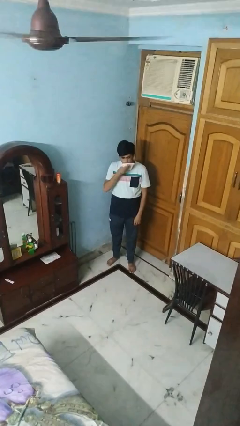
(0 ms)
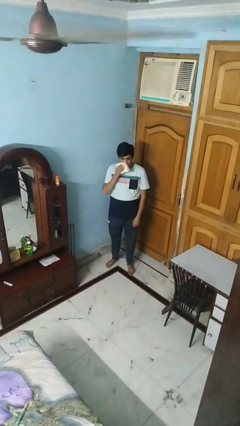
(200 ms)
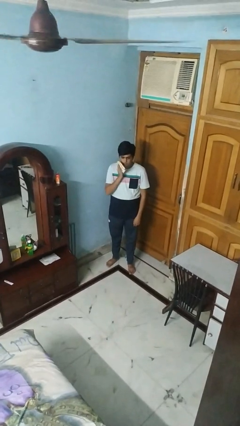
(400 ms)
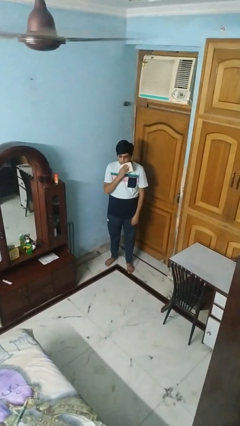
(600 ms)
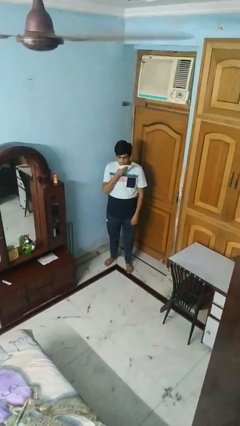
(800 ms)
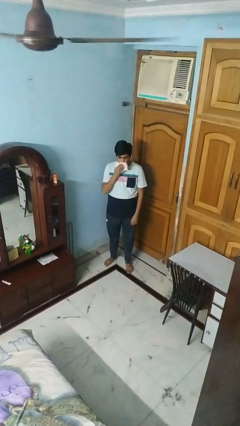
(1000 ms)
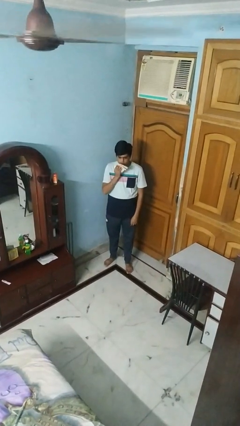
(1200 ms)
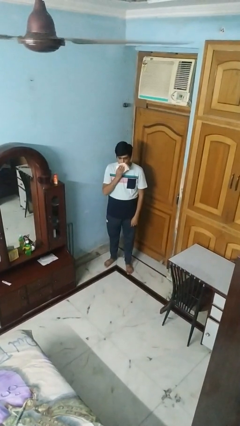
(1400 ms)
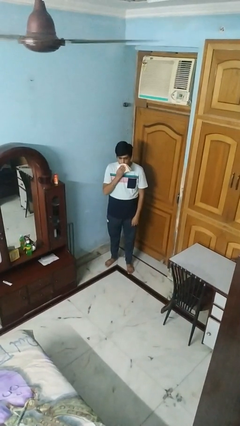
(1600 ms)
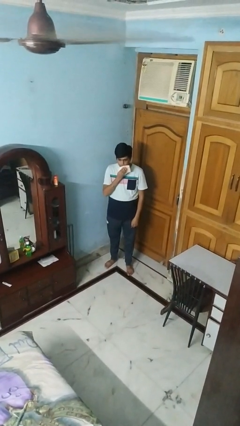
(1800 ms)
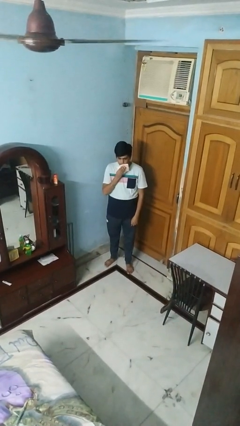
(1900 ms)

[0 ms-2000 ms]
person wipes mouth with napkin

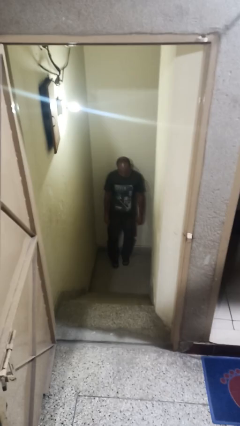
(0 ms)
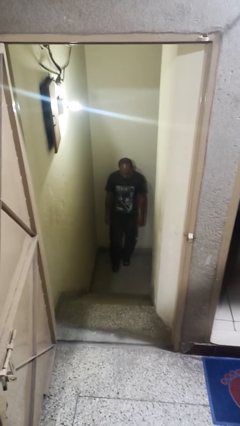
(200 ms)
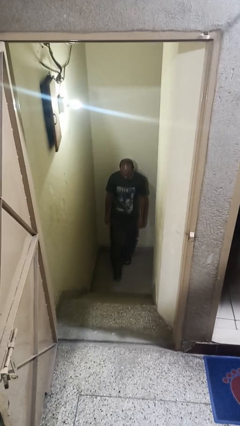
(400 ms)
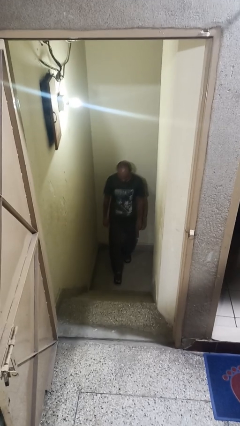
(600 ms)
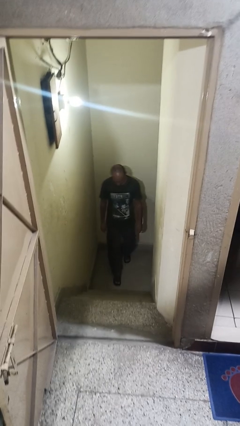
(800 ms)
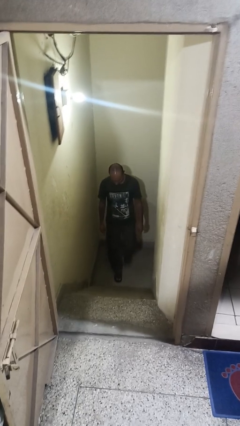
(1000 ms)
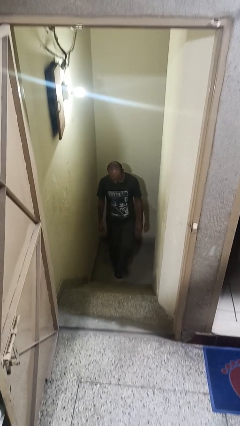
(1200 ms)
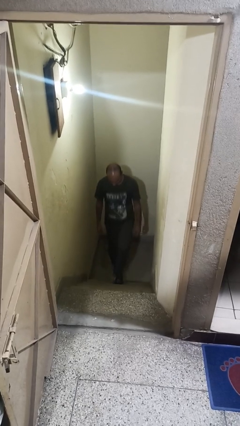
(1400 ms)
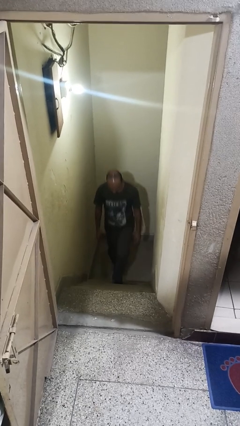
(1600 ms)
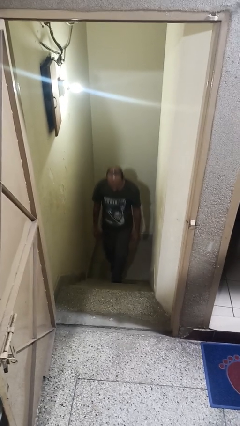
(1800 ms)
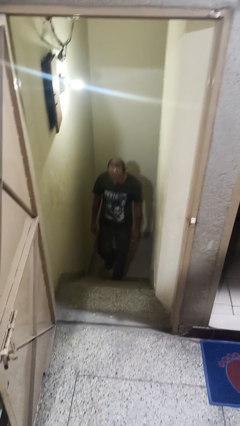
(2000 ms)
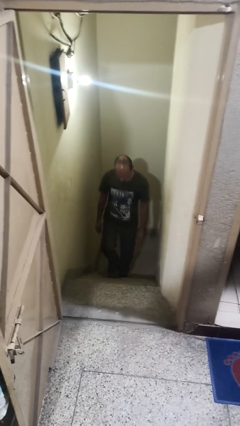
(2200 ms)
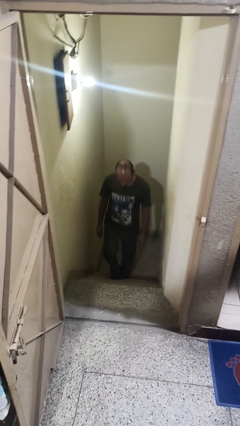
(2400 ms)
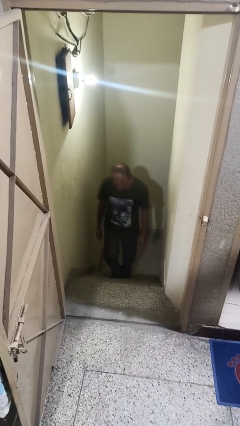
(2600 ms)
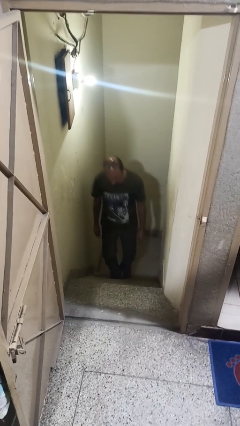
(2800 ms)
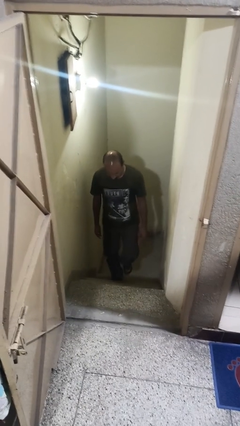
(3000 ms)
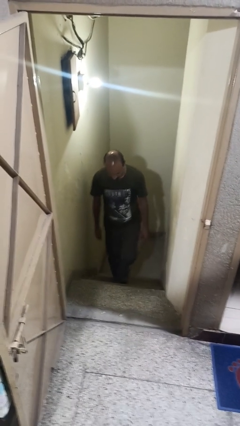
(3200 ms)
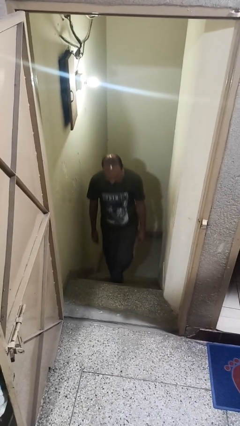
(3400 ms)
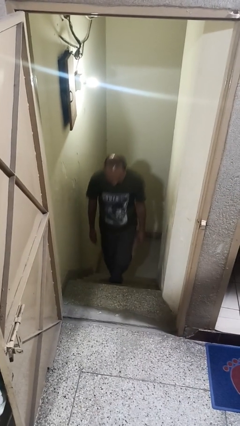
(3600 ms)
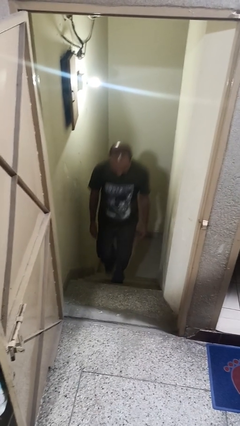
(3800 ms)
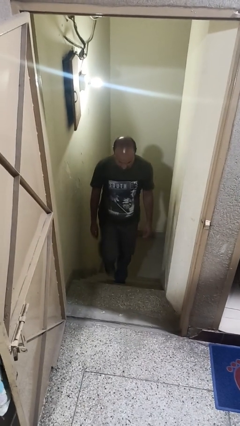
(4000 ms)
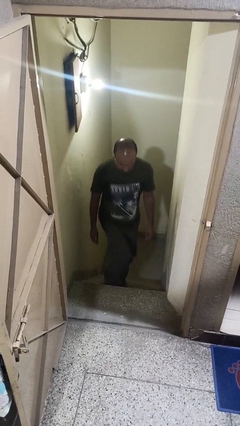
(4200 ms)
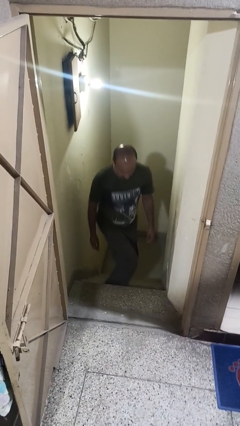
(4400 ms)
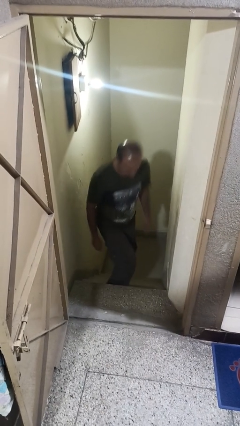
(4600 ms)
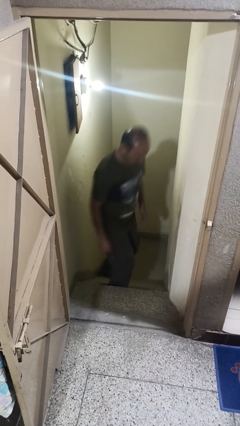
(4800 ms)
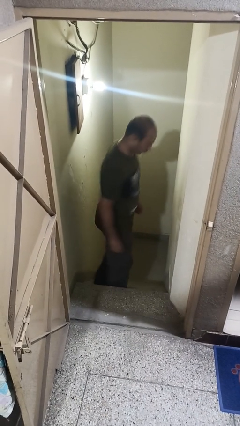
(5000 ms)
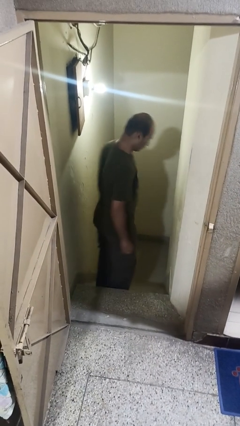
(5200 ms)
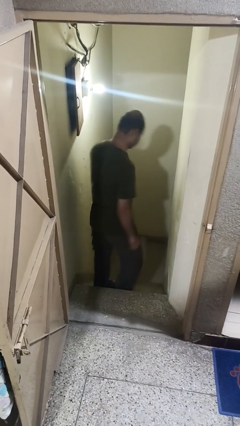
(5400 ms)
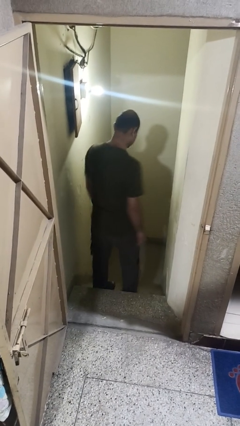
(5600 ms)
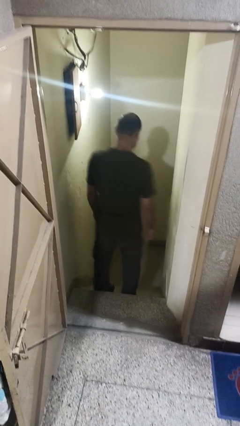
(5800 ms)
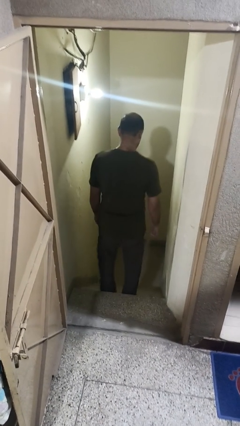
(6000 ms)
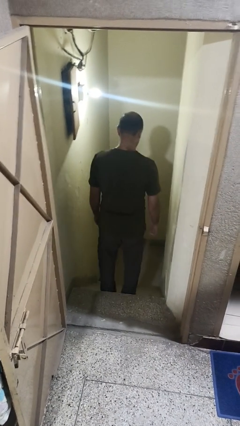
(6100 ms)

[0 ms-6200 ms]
person climbs up stairs

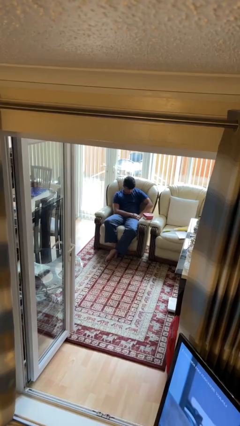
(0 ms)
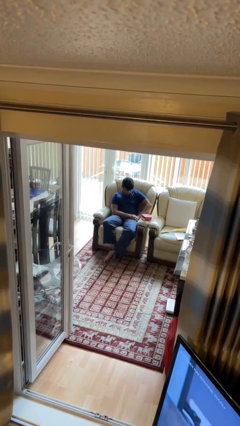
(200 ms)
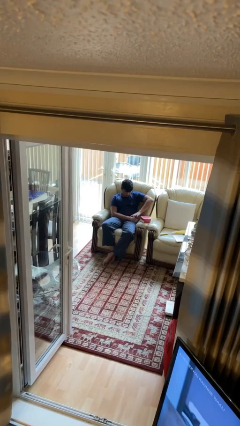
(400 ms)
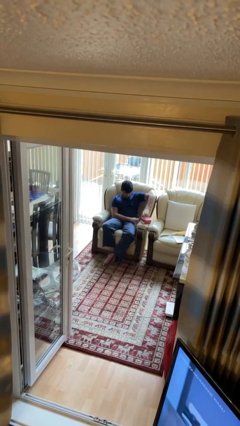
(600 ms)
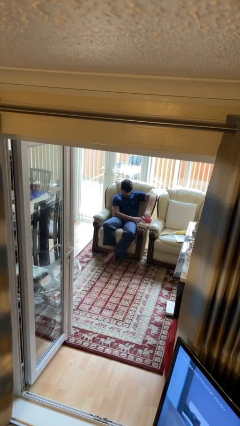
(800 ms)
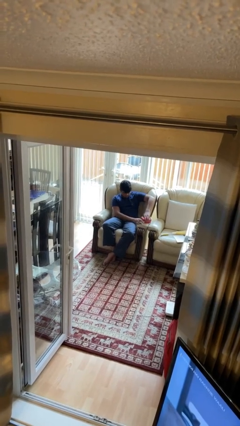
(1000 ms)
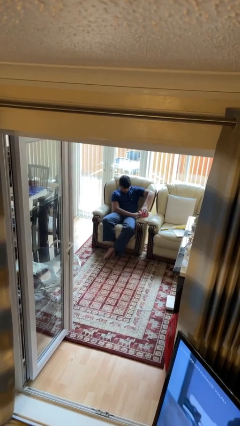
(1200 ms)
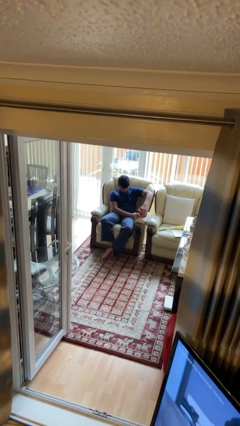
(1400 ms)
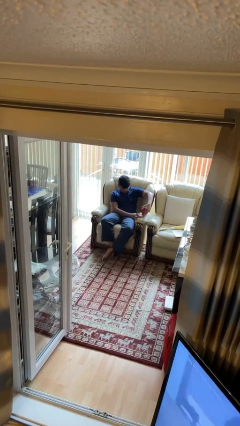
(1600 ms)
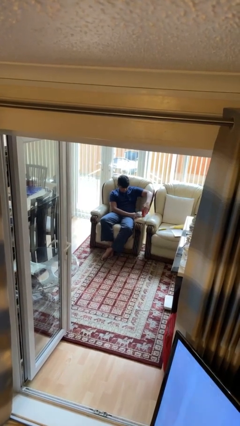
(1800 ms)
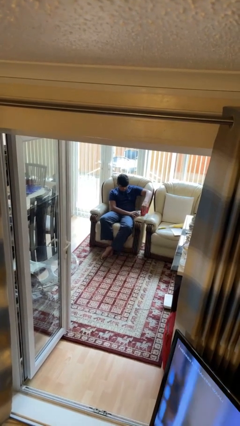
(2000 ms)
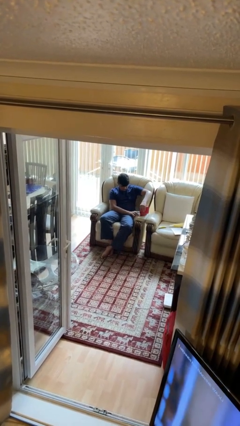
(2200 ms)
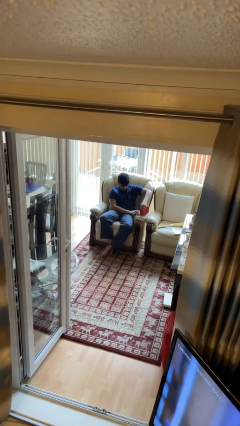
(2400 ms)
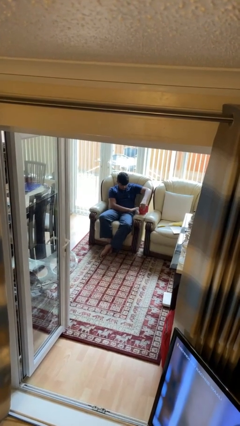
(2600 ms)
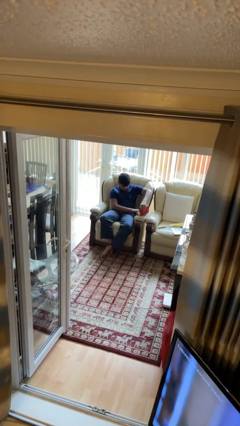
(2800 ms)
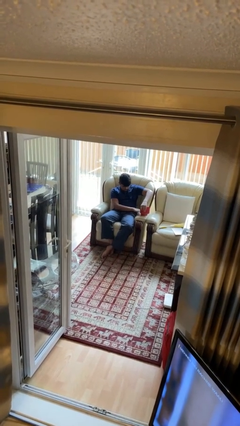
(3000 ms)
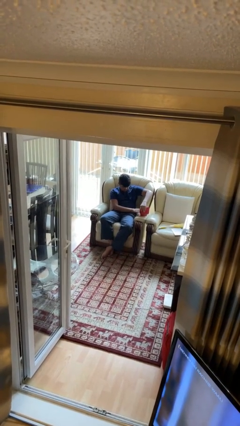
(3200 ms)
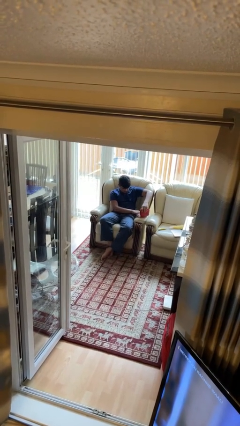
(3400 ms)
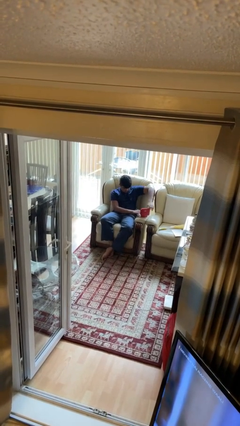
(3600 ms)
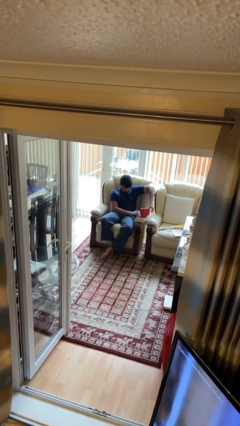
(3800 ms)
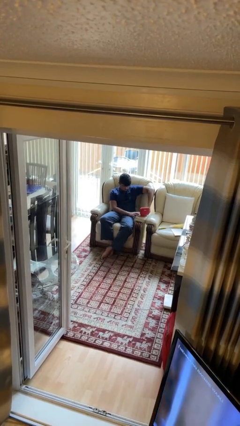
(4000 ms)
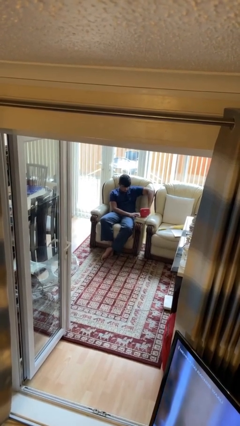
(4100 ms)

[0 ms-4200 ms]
person opens jewelry box

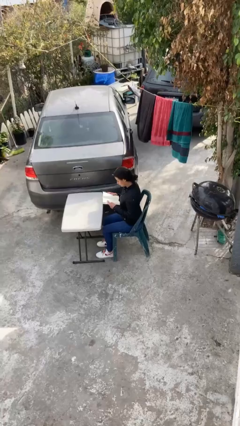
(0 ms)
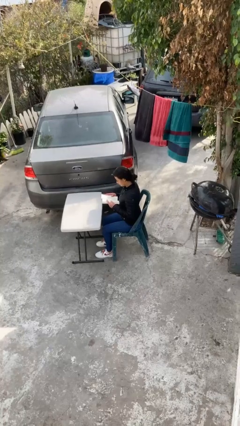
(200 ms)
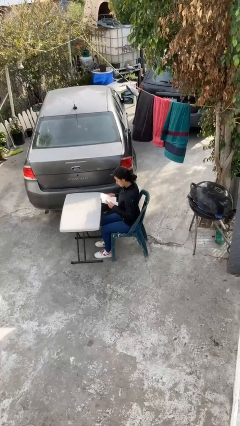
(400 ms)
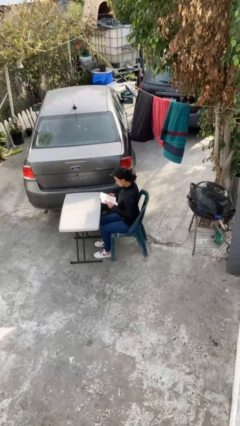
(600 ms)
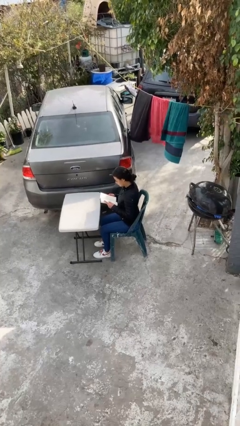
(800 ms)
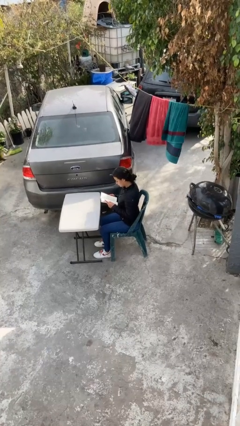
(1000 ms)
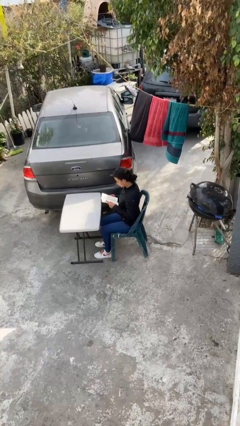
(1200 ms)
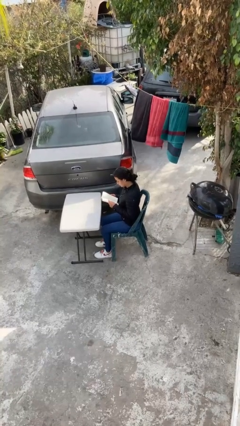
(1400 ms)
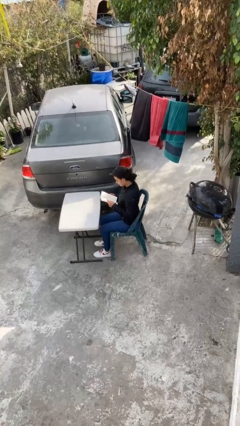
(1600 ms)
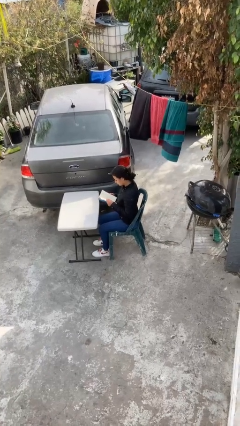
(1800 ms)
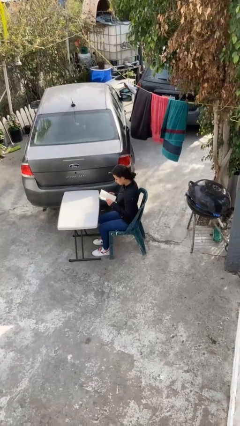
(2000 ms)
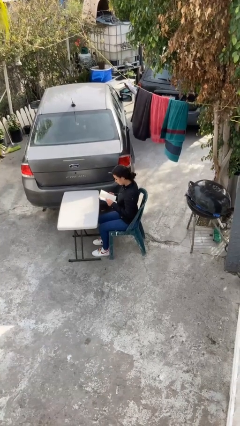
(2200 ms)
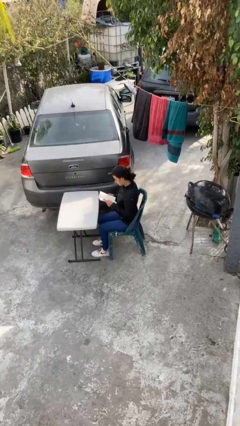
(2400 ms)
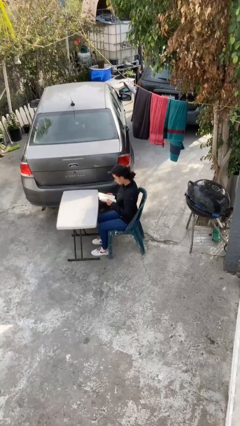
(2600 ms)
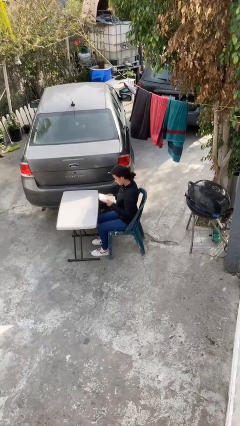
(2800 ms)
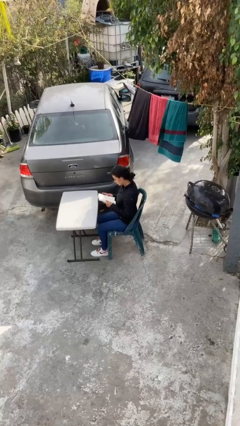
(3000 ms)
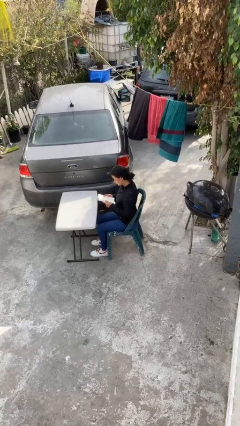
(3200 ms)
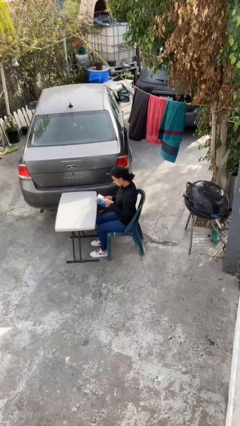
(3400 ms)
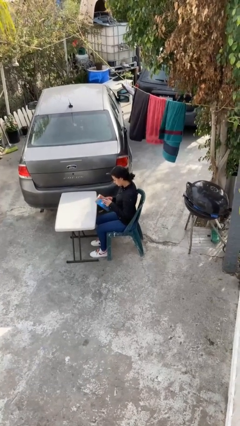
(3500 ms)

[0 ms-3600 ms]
person reads document

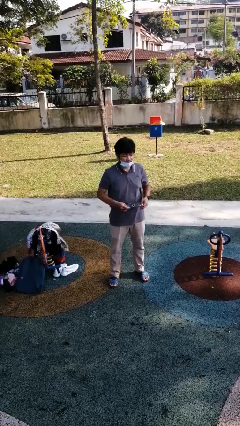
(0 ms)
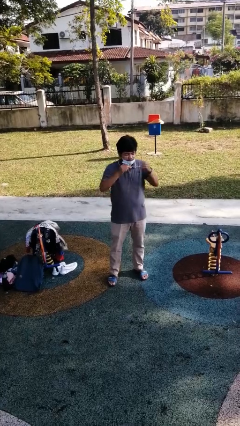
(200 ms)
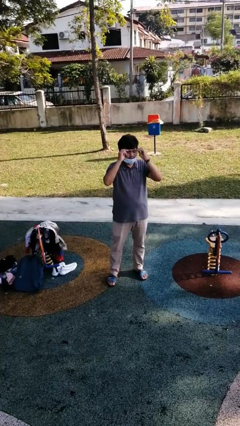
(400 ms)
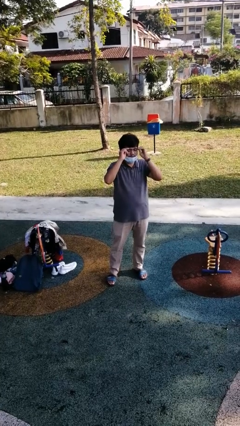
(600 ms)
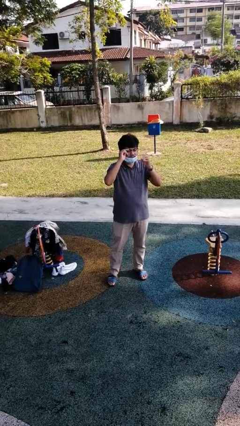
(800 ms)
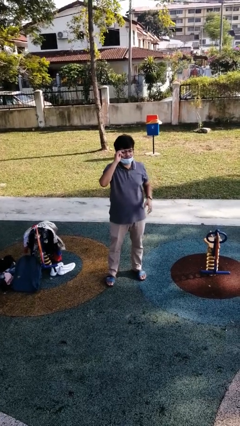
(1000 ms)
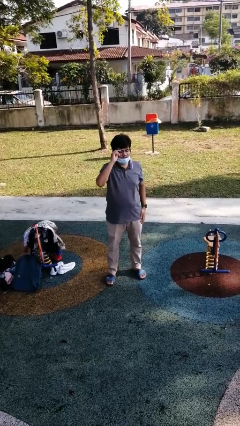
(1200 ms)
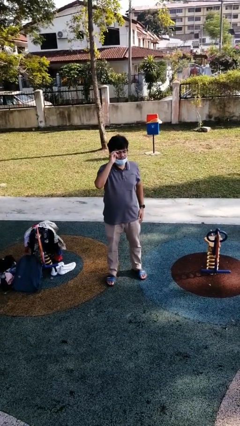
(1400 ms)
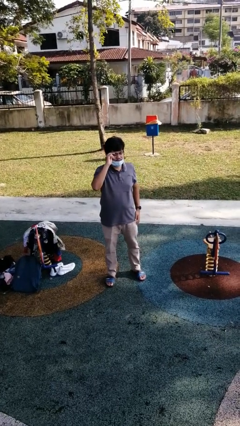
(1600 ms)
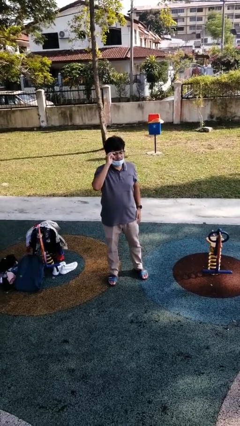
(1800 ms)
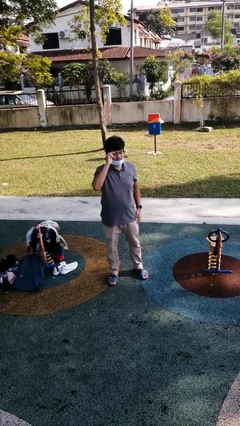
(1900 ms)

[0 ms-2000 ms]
person puts on glasses
